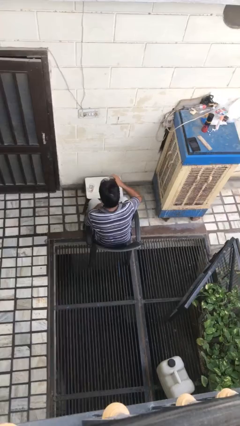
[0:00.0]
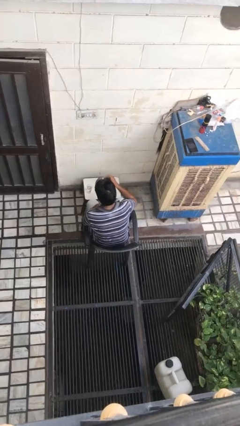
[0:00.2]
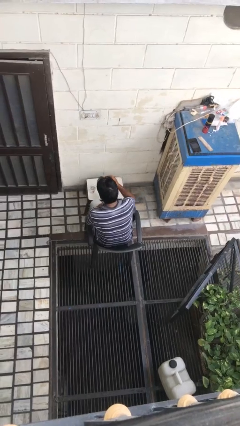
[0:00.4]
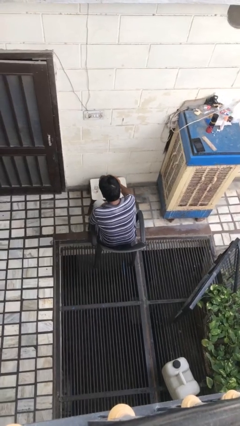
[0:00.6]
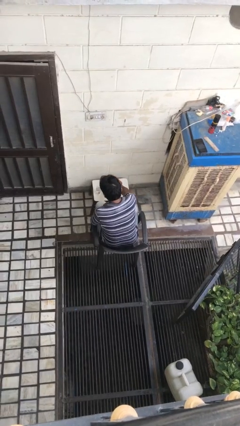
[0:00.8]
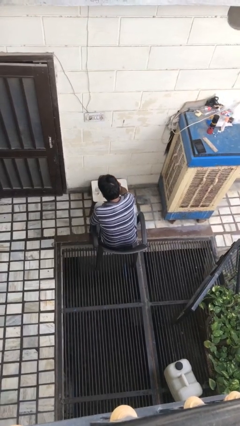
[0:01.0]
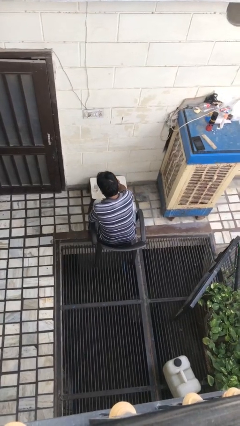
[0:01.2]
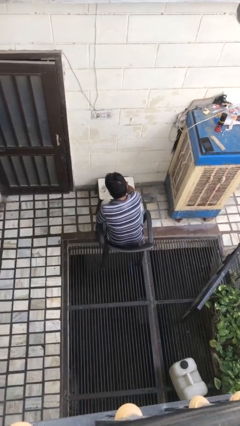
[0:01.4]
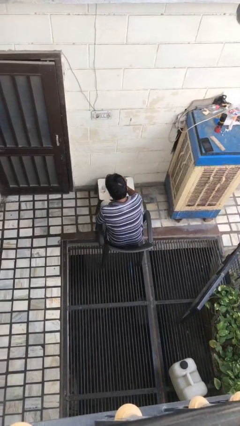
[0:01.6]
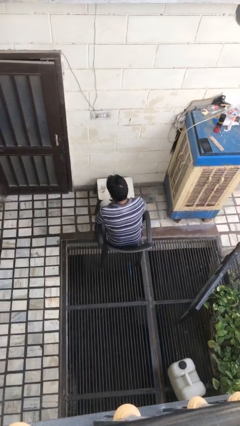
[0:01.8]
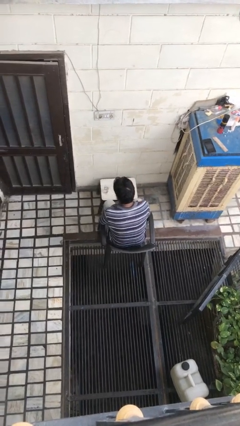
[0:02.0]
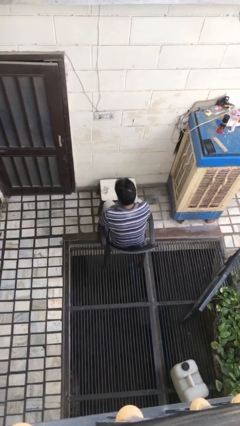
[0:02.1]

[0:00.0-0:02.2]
person puts down object on table

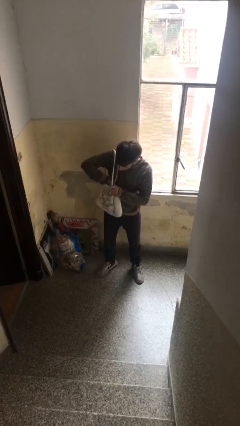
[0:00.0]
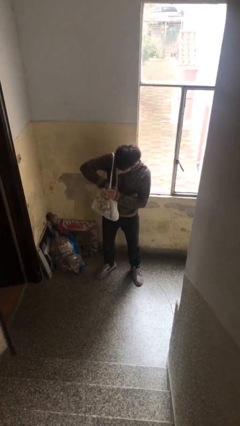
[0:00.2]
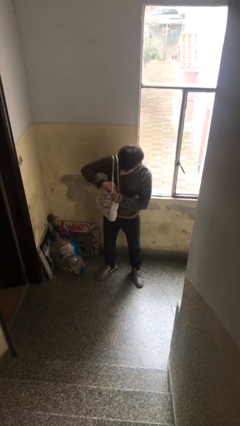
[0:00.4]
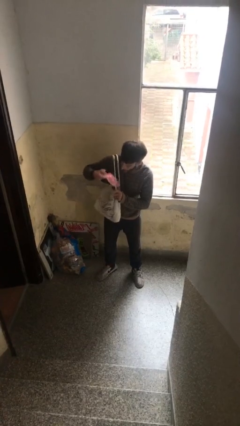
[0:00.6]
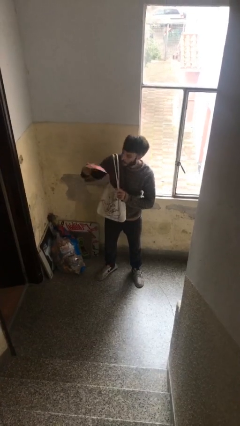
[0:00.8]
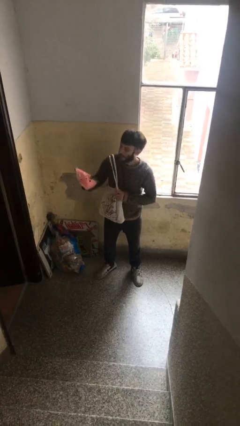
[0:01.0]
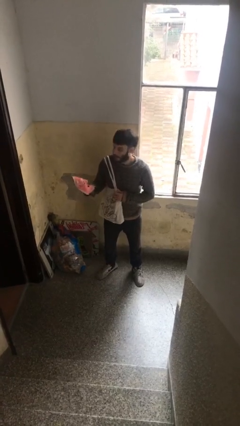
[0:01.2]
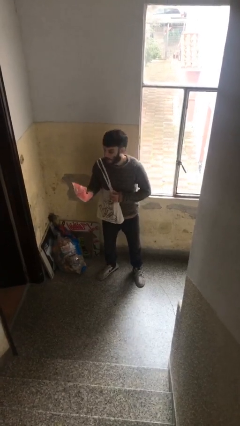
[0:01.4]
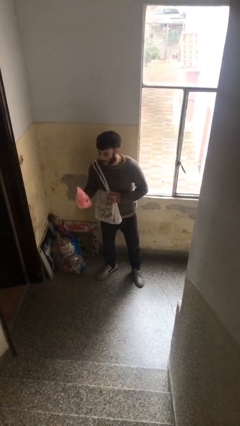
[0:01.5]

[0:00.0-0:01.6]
person takes object from purse

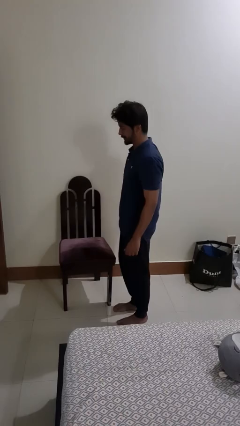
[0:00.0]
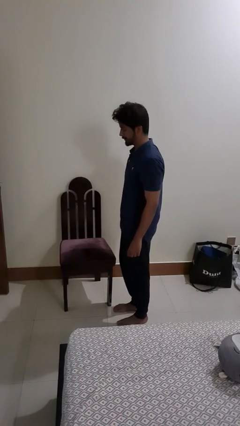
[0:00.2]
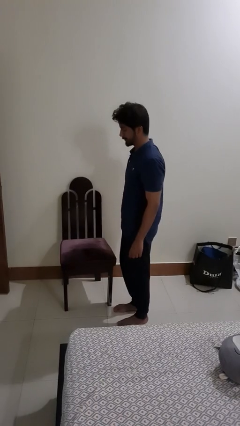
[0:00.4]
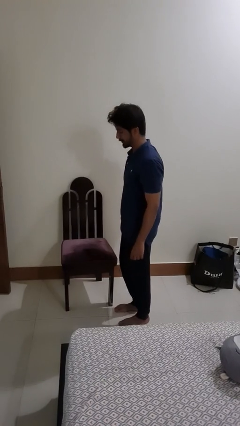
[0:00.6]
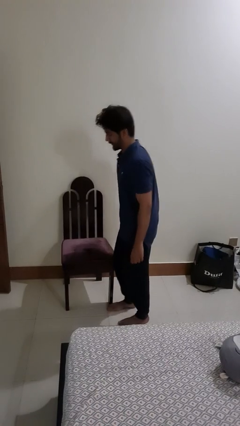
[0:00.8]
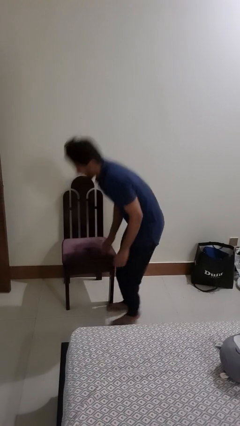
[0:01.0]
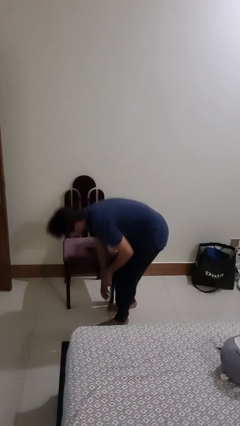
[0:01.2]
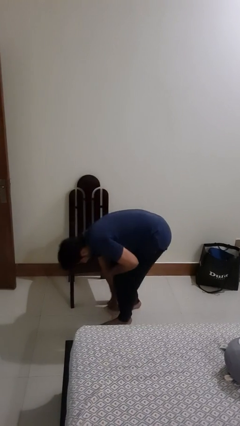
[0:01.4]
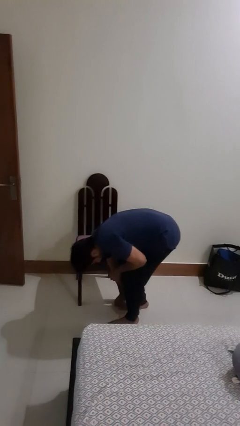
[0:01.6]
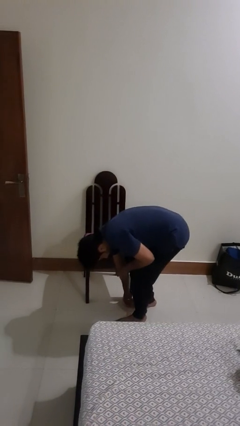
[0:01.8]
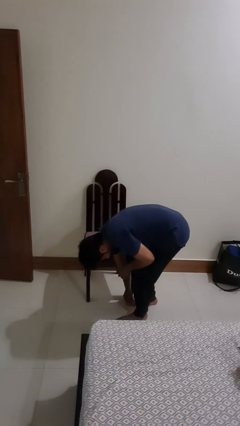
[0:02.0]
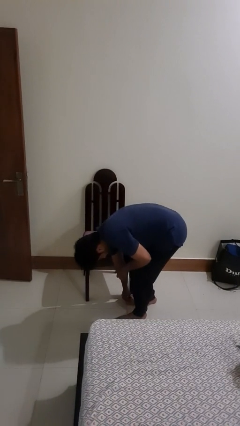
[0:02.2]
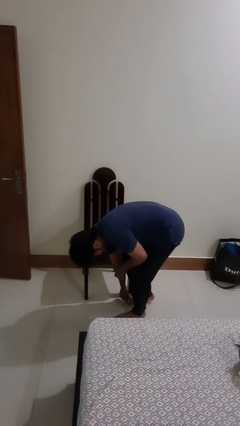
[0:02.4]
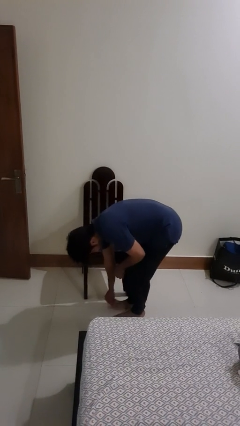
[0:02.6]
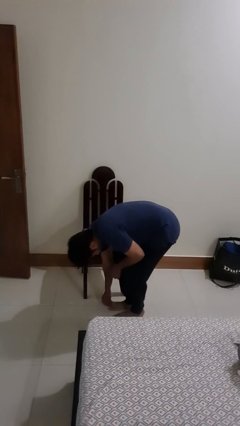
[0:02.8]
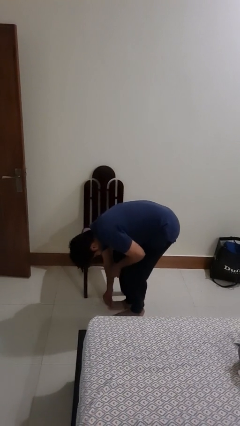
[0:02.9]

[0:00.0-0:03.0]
person stubs toe

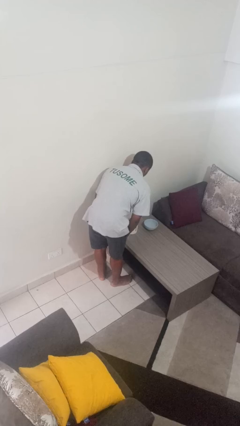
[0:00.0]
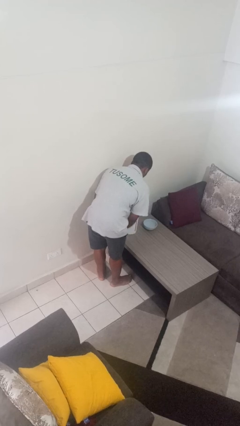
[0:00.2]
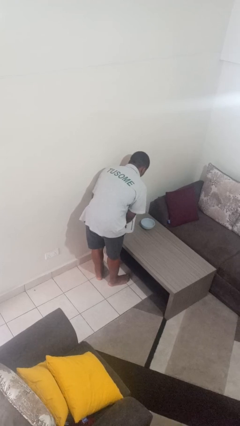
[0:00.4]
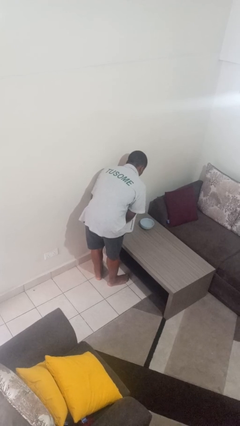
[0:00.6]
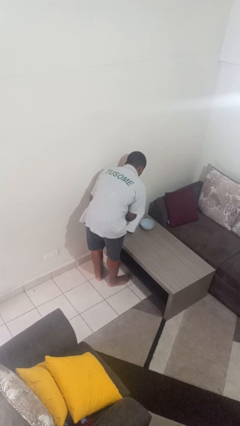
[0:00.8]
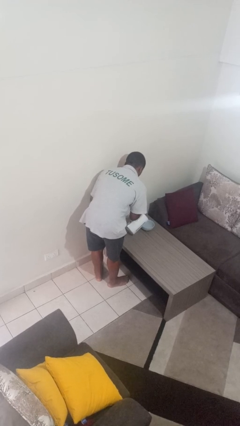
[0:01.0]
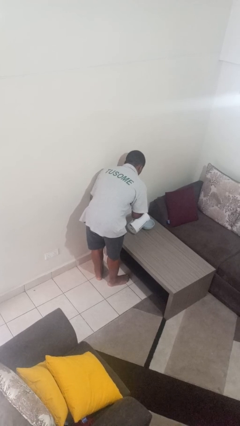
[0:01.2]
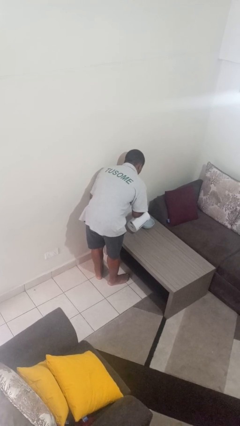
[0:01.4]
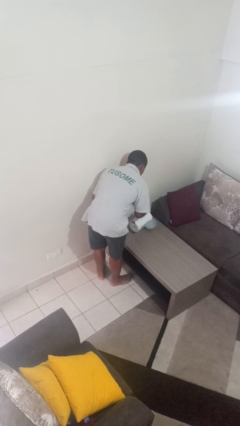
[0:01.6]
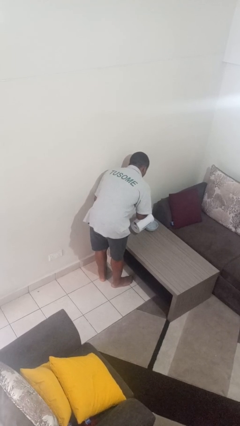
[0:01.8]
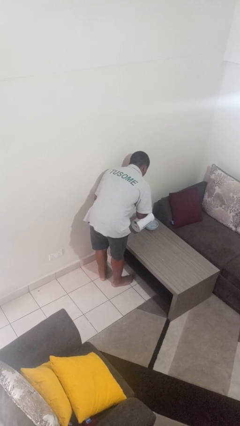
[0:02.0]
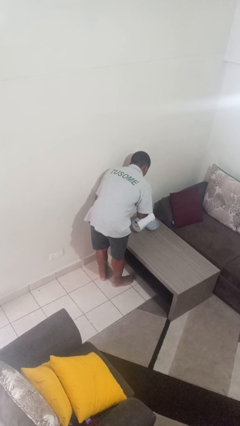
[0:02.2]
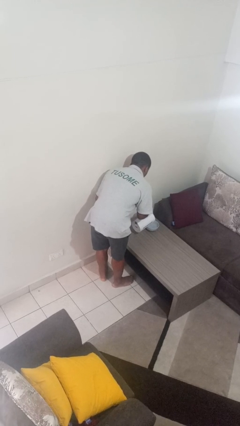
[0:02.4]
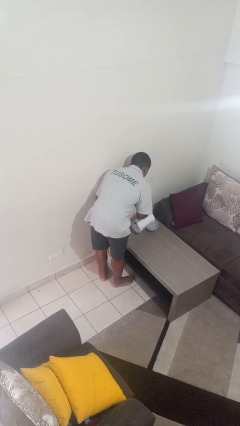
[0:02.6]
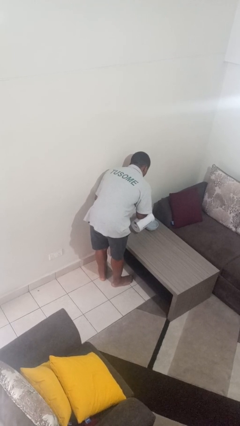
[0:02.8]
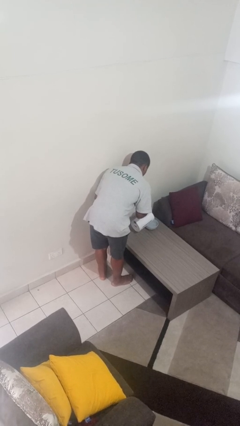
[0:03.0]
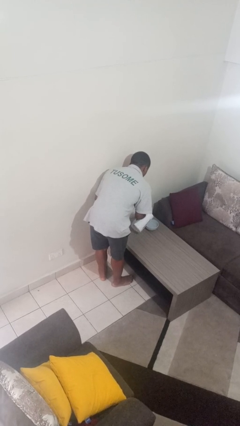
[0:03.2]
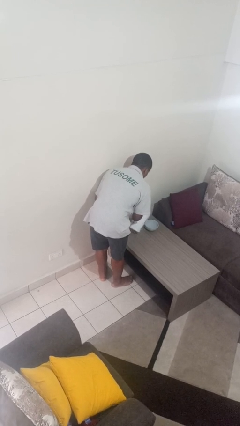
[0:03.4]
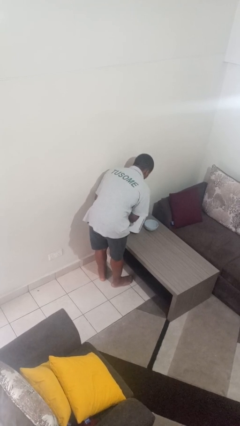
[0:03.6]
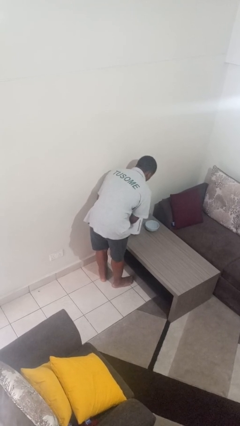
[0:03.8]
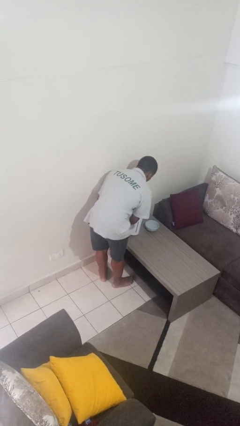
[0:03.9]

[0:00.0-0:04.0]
person pours into bowl

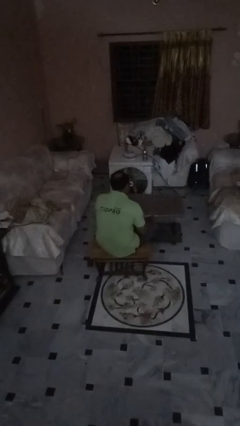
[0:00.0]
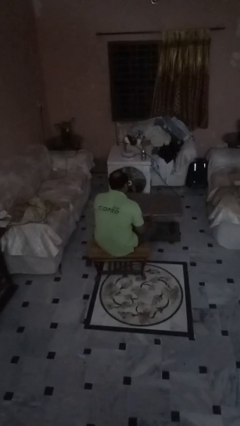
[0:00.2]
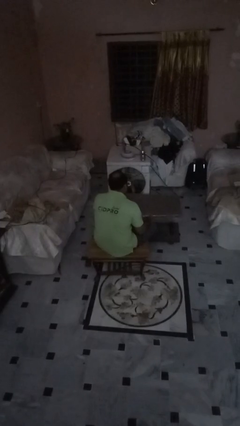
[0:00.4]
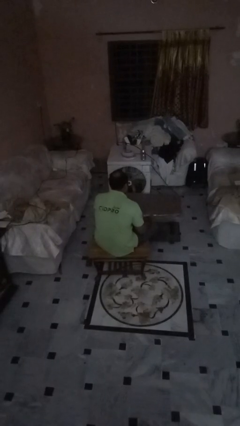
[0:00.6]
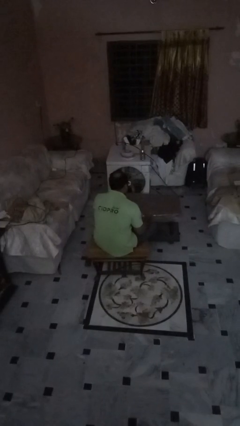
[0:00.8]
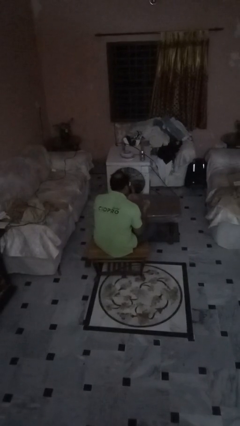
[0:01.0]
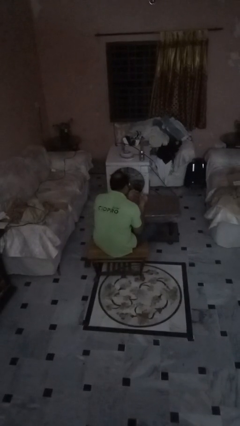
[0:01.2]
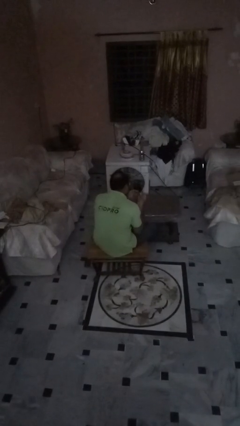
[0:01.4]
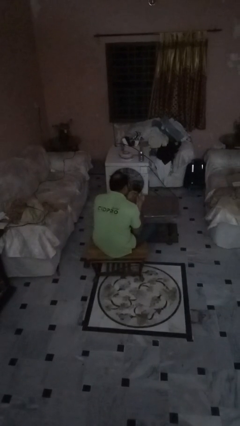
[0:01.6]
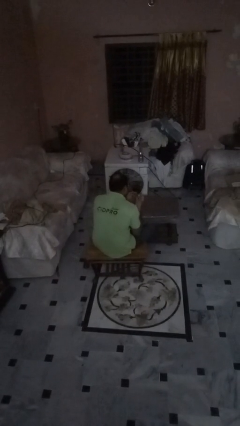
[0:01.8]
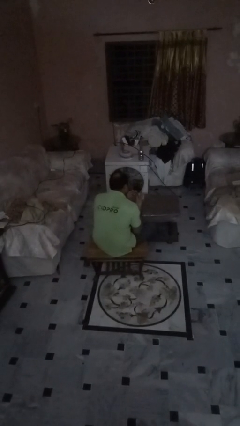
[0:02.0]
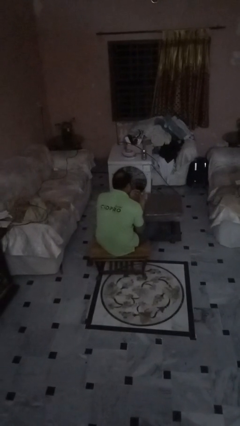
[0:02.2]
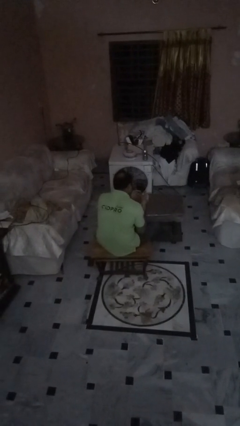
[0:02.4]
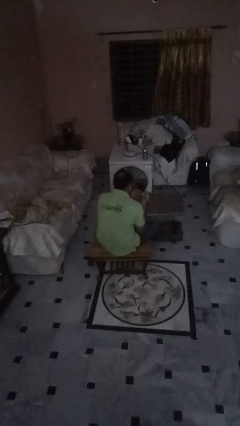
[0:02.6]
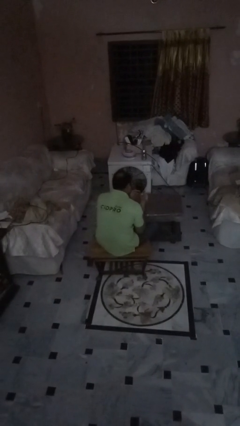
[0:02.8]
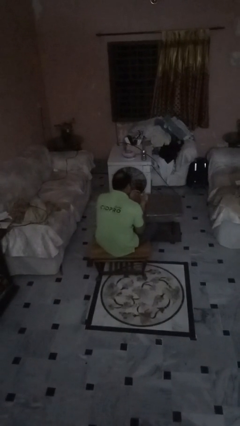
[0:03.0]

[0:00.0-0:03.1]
person clips fingernails

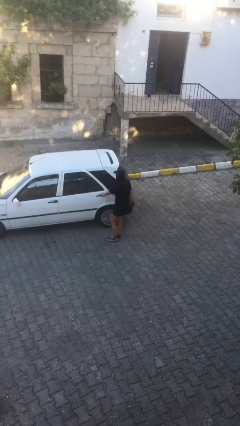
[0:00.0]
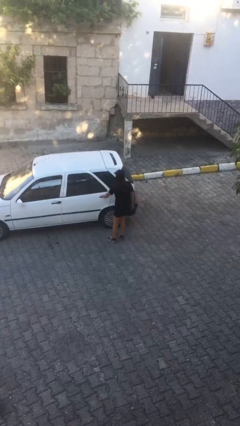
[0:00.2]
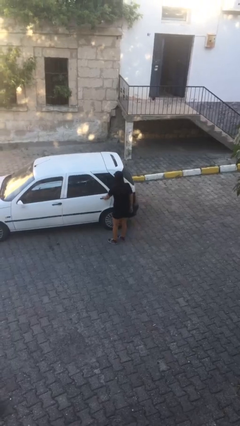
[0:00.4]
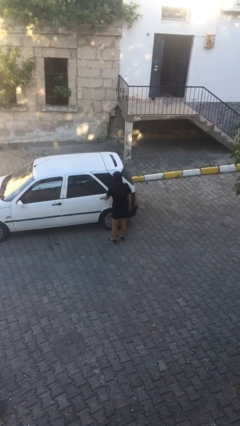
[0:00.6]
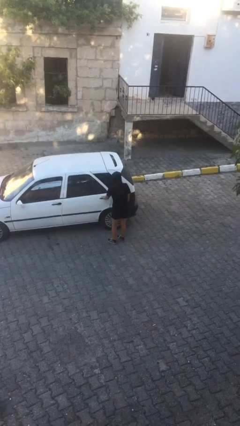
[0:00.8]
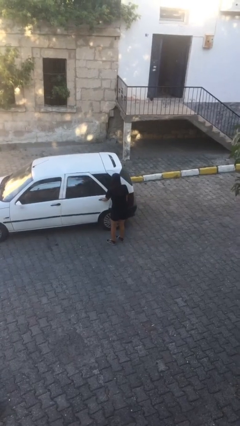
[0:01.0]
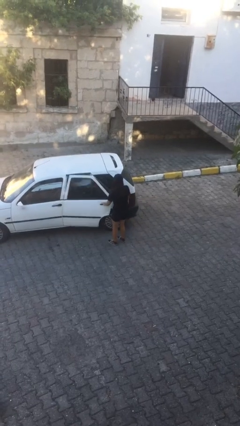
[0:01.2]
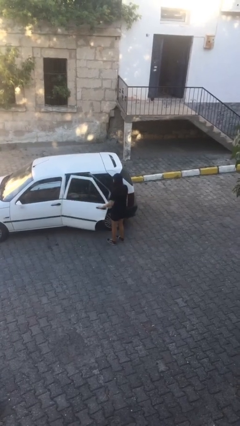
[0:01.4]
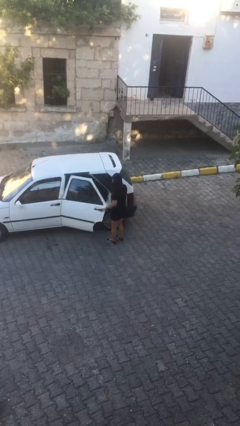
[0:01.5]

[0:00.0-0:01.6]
person opens car door

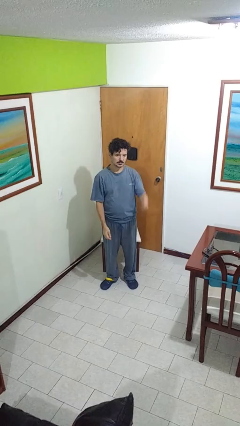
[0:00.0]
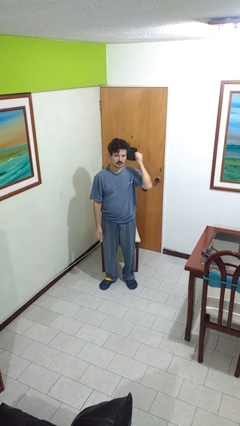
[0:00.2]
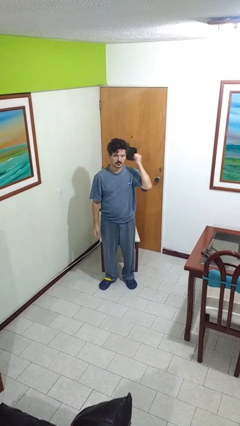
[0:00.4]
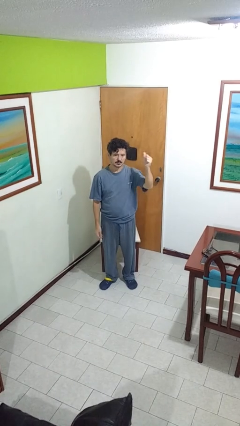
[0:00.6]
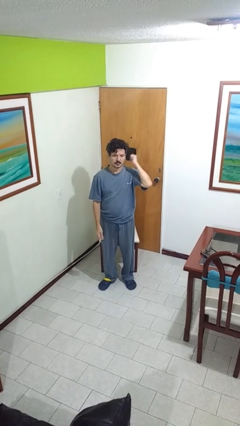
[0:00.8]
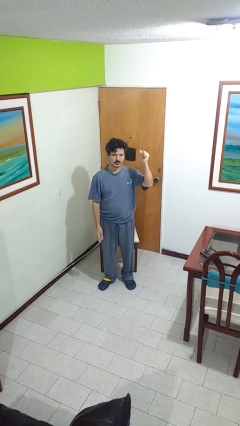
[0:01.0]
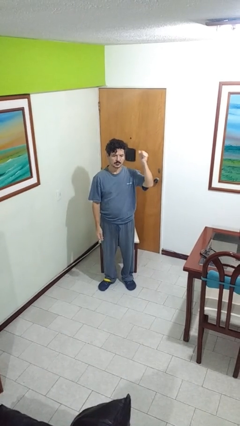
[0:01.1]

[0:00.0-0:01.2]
person gestures behind me
